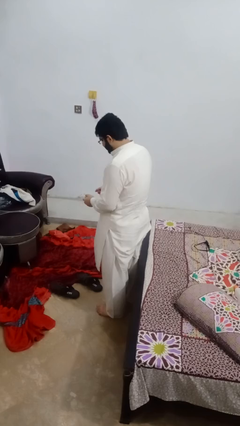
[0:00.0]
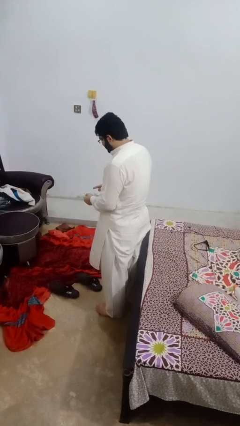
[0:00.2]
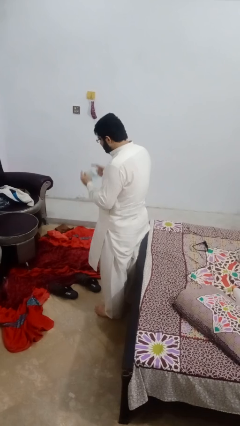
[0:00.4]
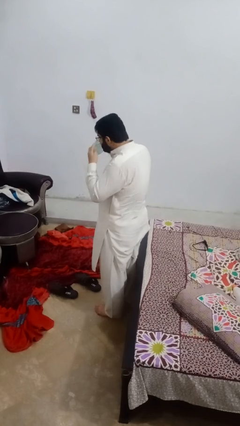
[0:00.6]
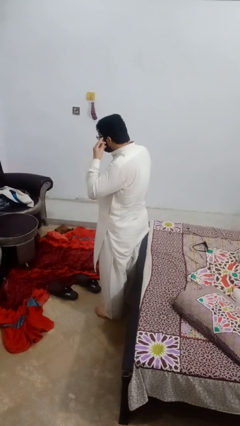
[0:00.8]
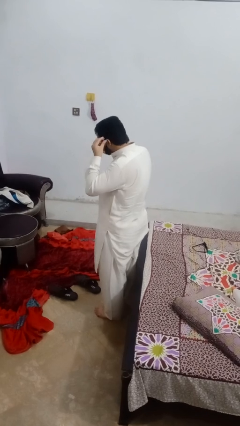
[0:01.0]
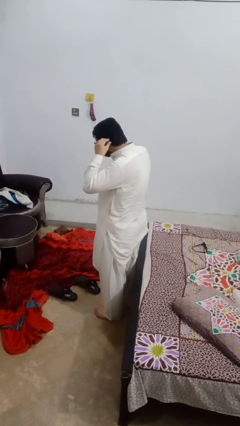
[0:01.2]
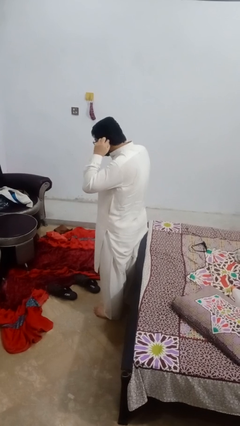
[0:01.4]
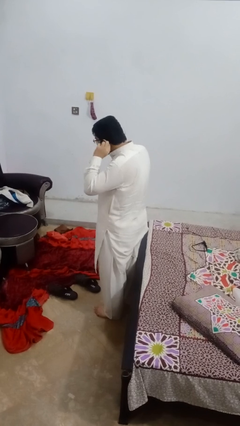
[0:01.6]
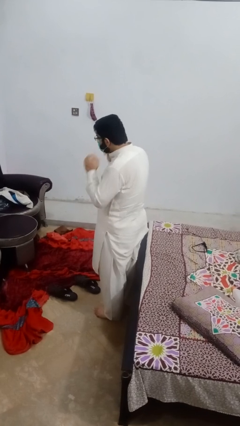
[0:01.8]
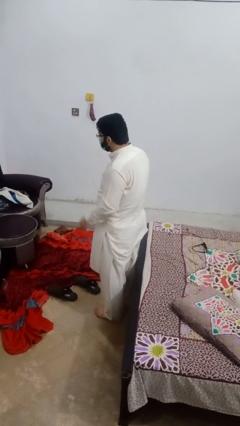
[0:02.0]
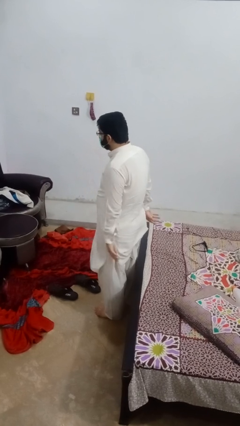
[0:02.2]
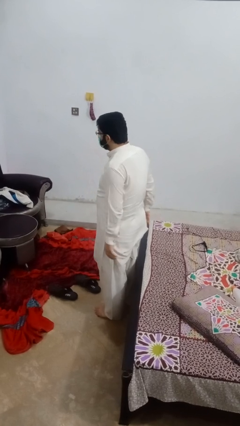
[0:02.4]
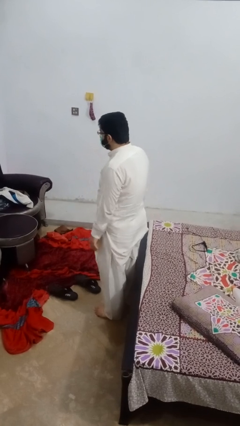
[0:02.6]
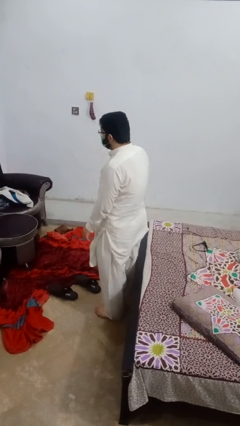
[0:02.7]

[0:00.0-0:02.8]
person puts on facemask

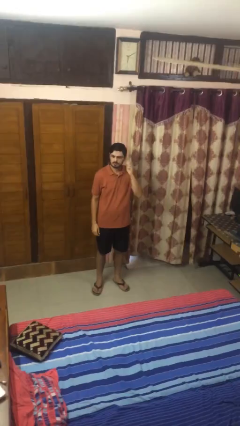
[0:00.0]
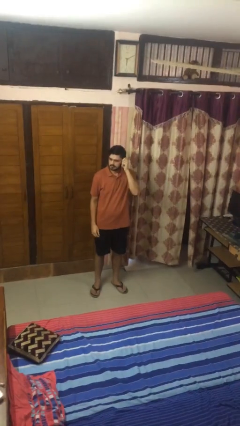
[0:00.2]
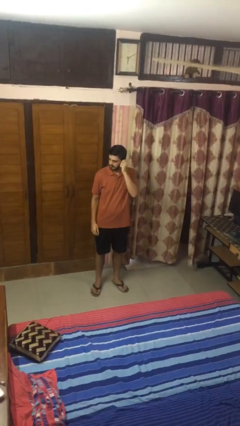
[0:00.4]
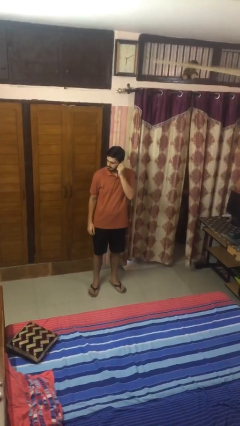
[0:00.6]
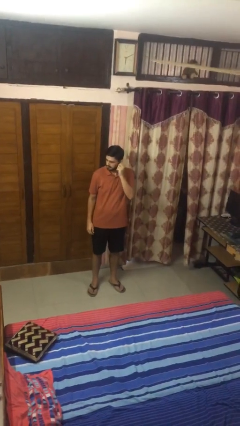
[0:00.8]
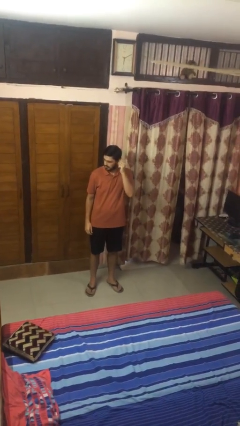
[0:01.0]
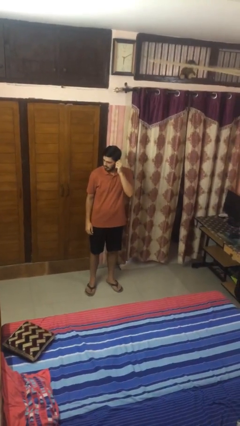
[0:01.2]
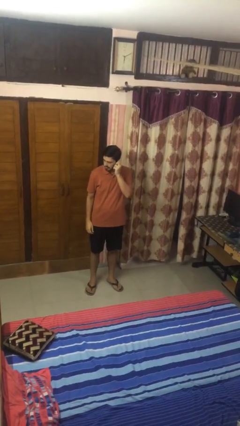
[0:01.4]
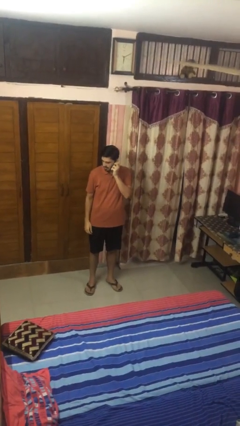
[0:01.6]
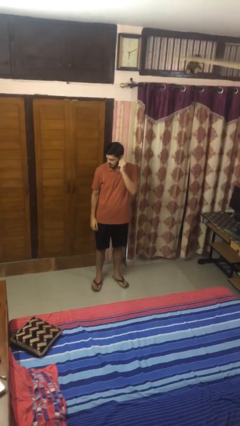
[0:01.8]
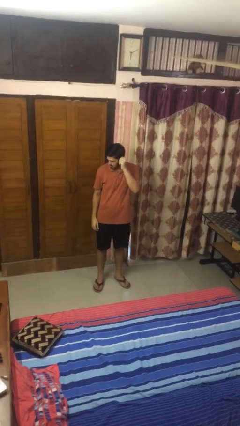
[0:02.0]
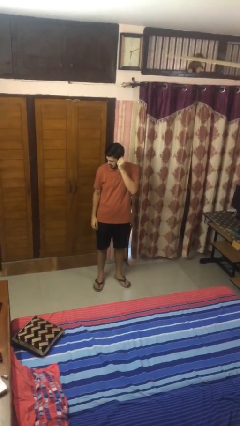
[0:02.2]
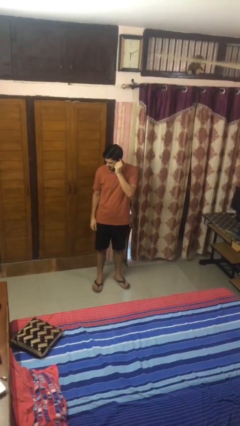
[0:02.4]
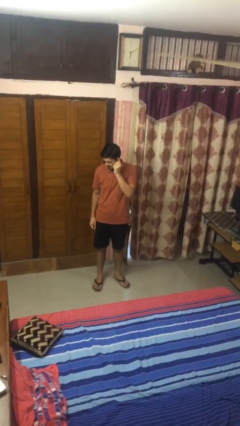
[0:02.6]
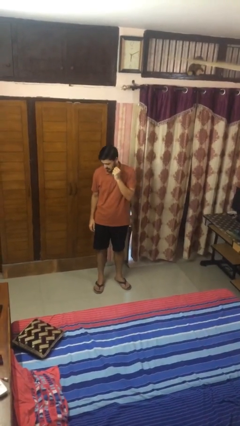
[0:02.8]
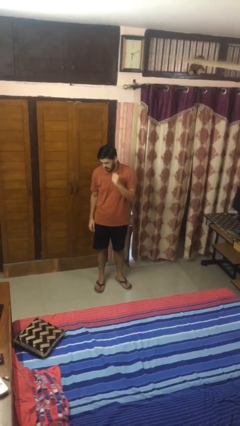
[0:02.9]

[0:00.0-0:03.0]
person touches earlobe

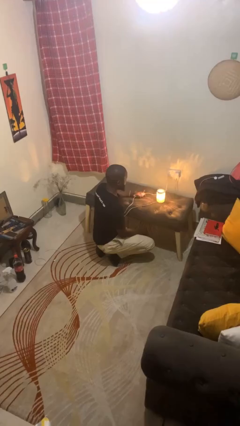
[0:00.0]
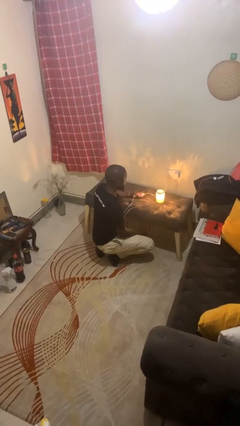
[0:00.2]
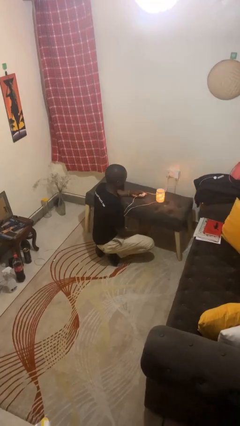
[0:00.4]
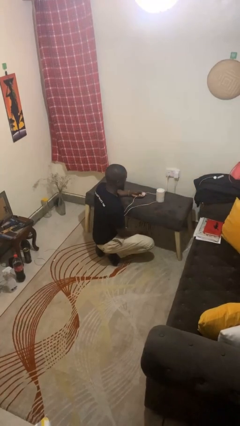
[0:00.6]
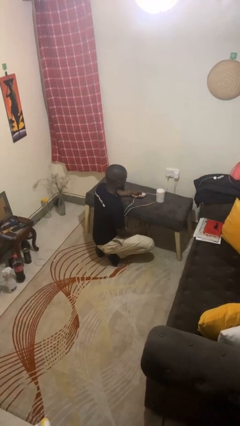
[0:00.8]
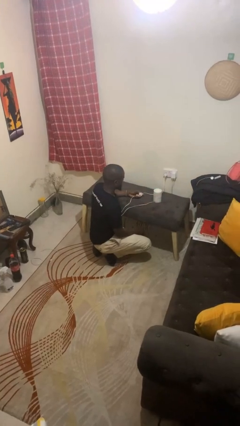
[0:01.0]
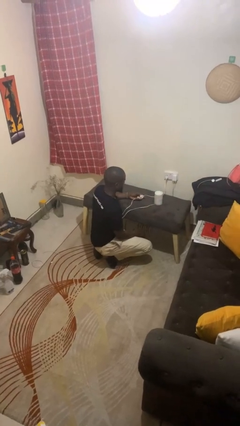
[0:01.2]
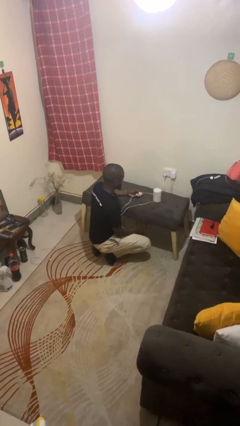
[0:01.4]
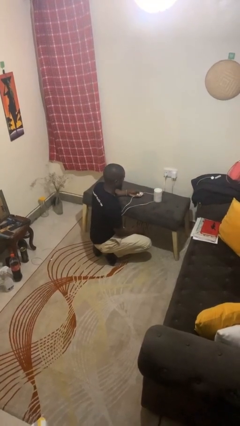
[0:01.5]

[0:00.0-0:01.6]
person turns off lamp

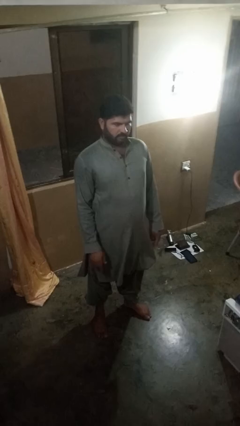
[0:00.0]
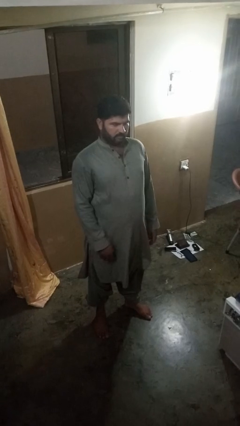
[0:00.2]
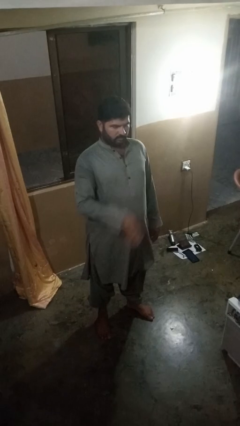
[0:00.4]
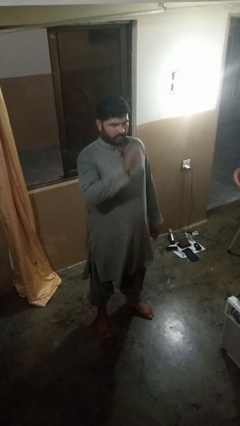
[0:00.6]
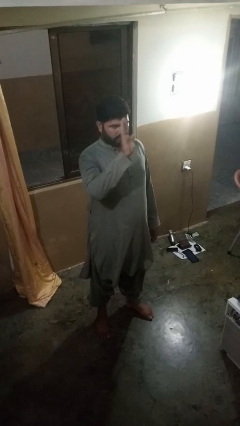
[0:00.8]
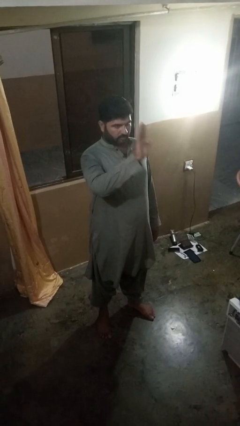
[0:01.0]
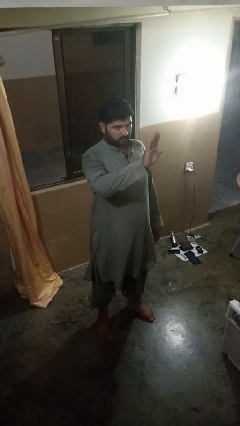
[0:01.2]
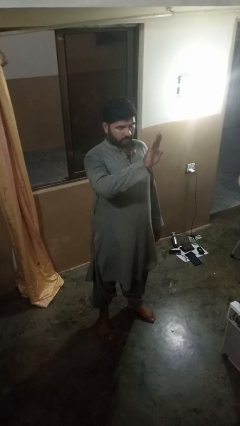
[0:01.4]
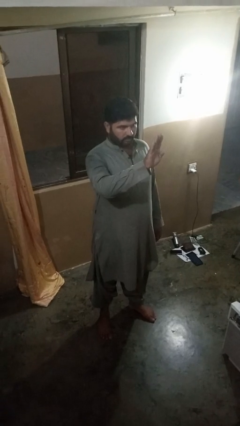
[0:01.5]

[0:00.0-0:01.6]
person gestures stop

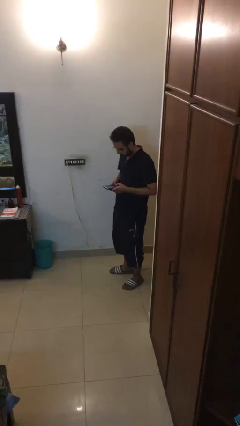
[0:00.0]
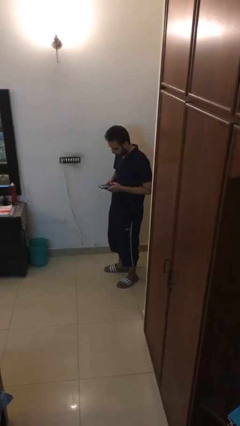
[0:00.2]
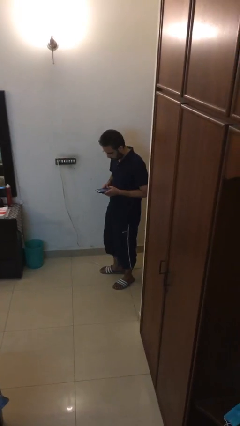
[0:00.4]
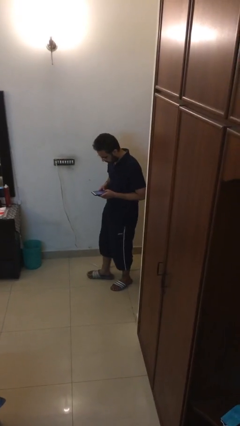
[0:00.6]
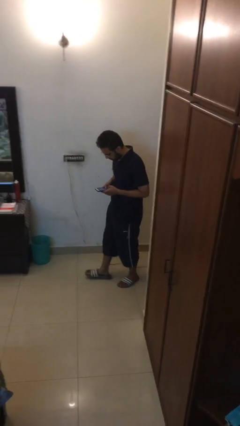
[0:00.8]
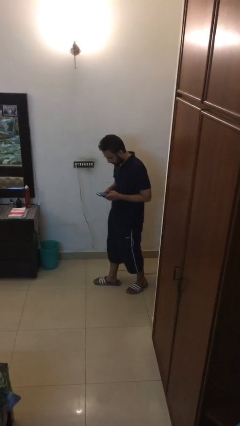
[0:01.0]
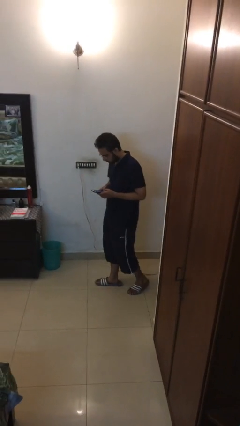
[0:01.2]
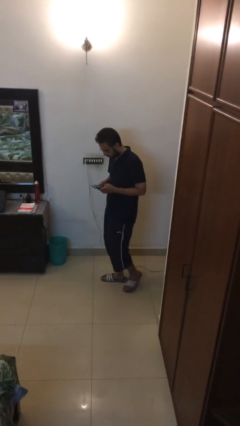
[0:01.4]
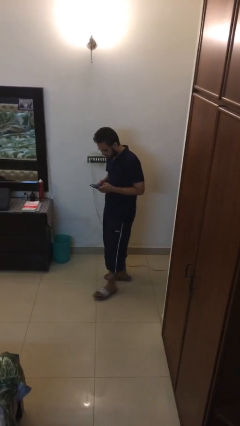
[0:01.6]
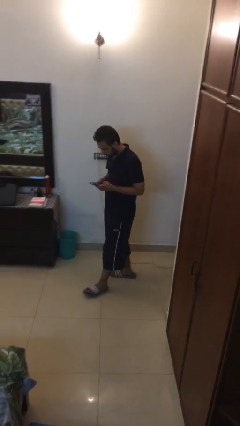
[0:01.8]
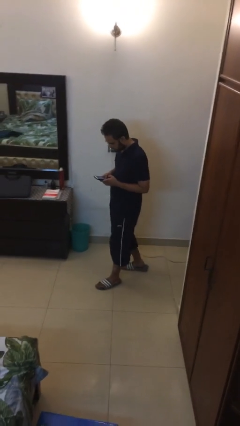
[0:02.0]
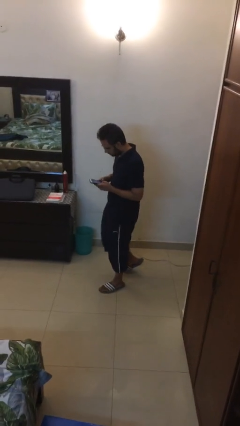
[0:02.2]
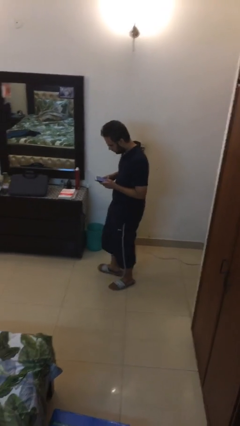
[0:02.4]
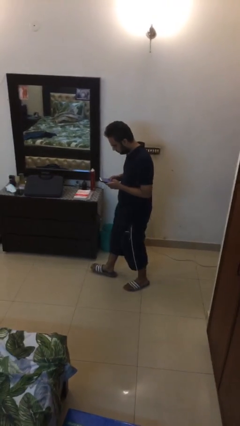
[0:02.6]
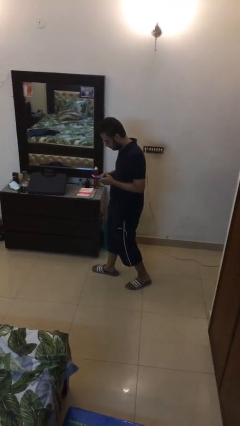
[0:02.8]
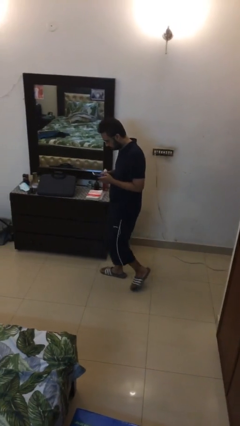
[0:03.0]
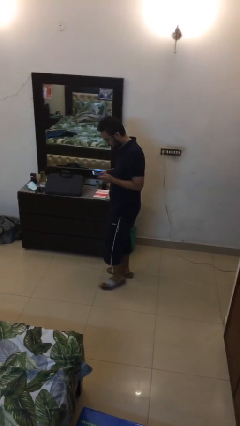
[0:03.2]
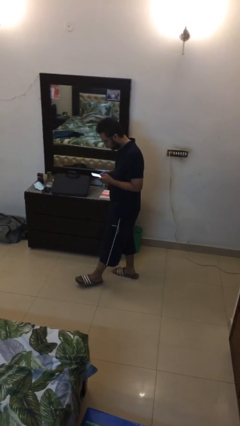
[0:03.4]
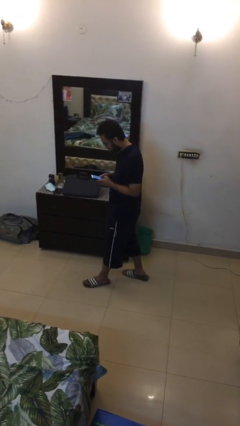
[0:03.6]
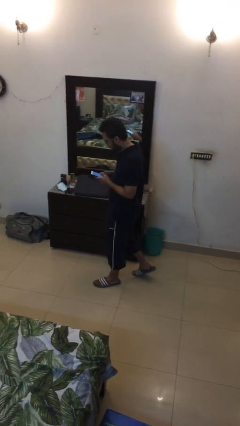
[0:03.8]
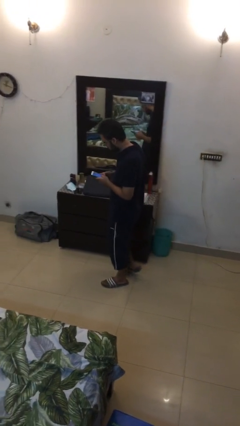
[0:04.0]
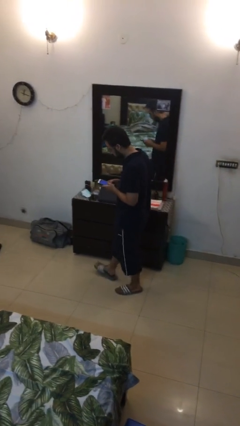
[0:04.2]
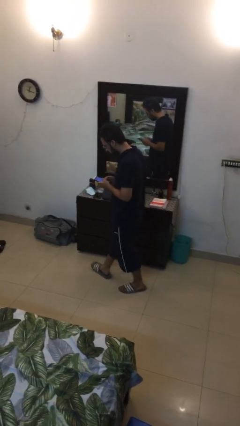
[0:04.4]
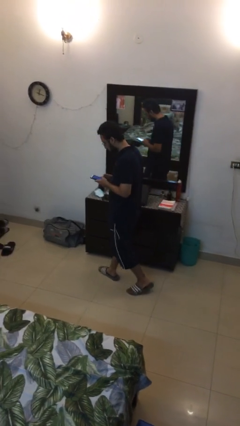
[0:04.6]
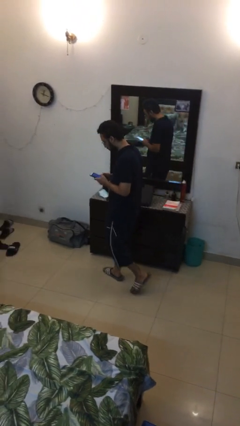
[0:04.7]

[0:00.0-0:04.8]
person texts on phone

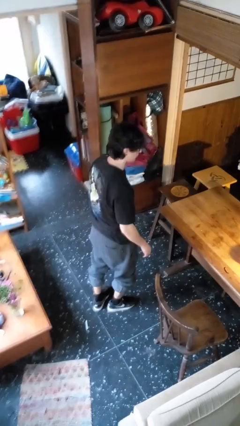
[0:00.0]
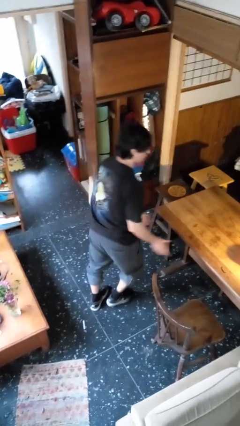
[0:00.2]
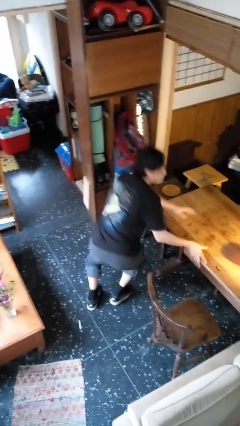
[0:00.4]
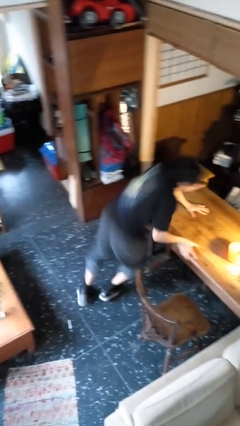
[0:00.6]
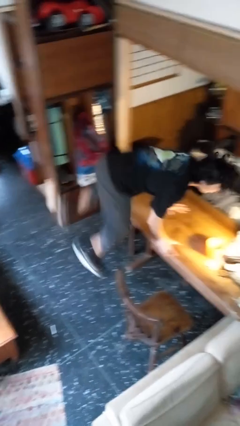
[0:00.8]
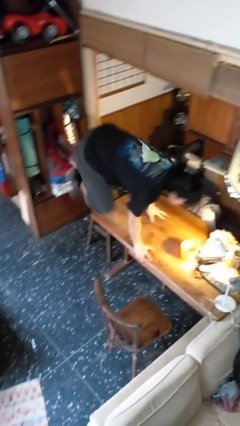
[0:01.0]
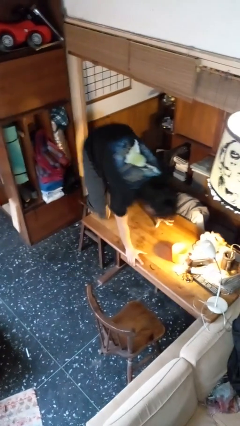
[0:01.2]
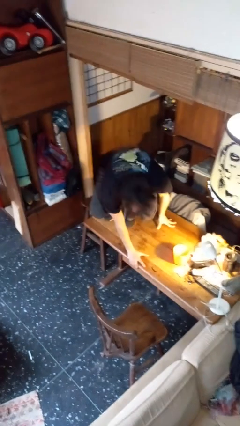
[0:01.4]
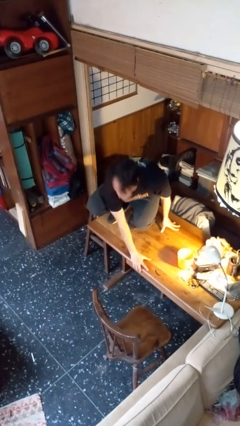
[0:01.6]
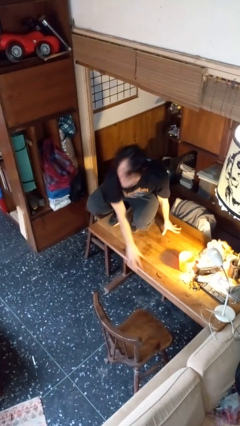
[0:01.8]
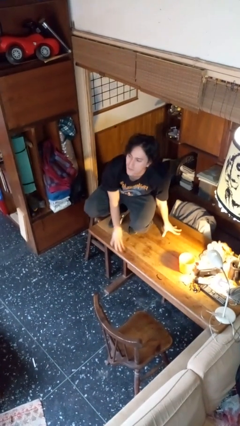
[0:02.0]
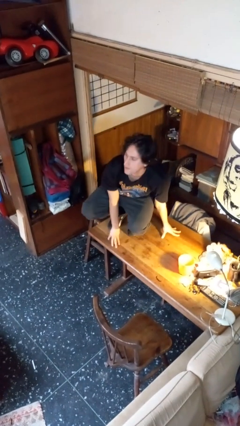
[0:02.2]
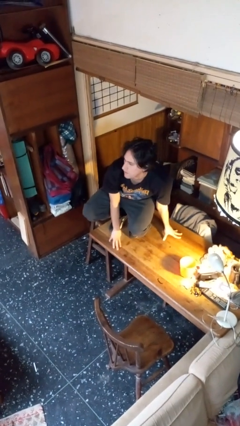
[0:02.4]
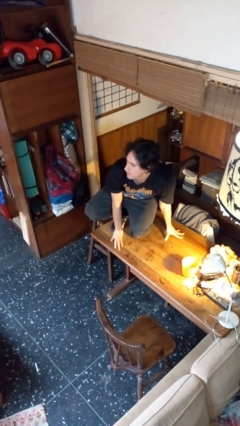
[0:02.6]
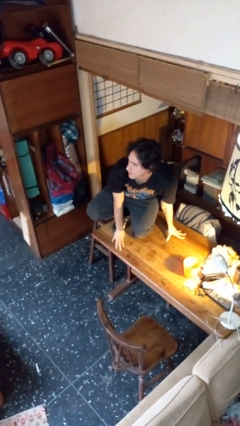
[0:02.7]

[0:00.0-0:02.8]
person climbs on table

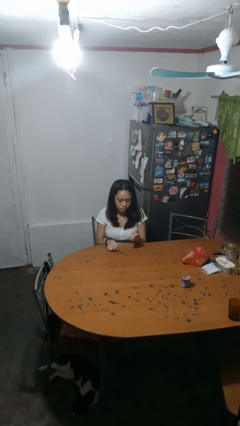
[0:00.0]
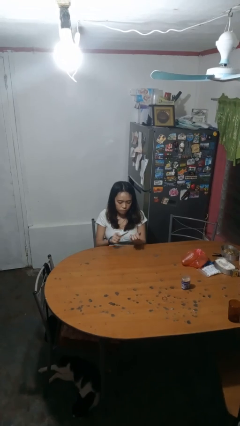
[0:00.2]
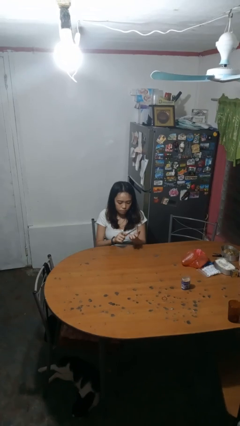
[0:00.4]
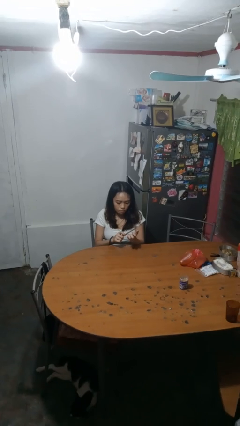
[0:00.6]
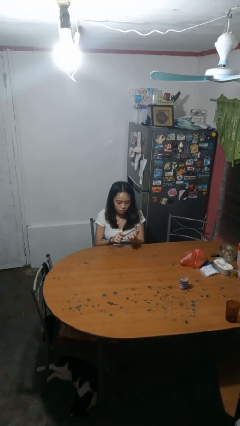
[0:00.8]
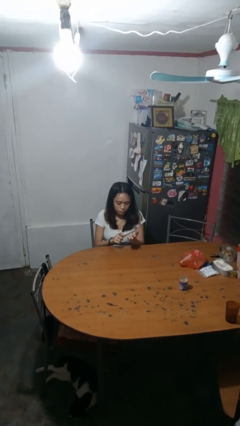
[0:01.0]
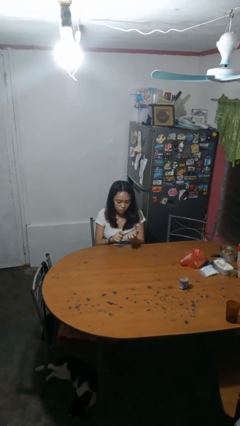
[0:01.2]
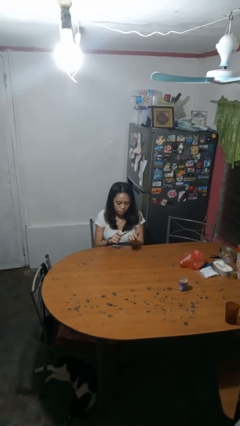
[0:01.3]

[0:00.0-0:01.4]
person files fingernails
